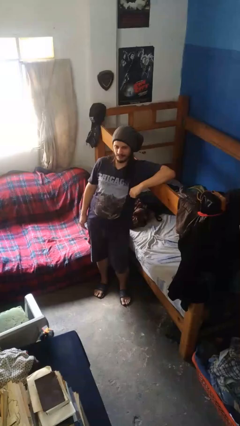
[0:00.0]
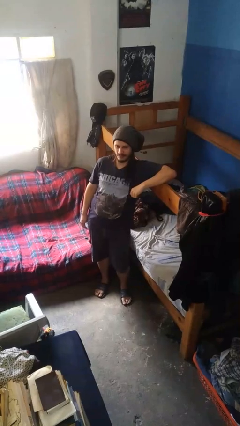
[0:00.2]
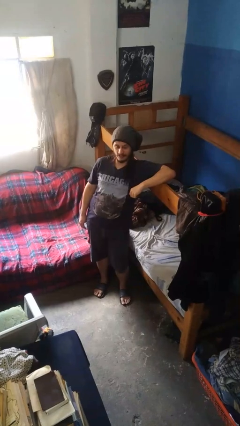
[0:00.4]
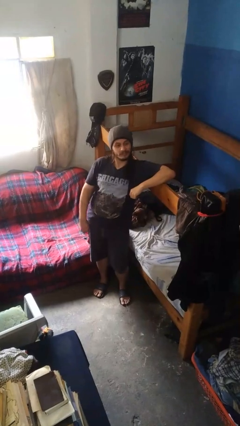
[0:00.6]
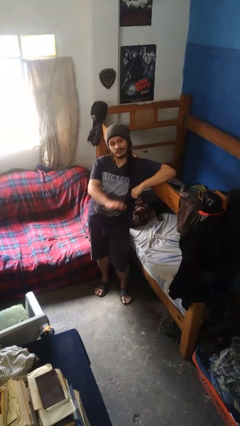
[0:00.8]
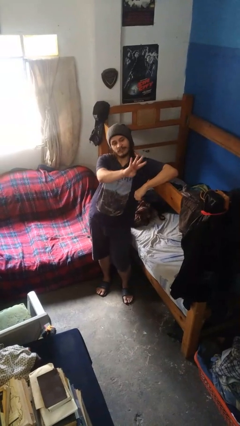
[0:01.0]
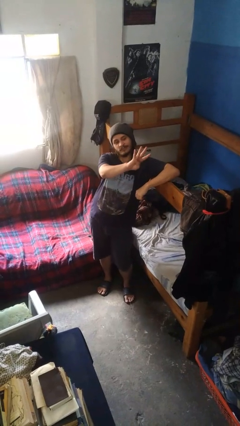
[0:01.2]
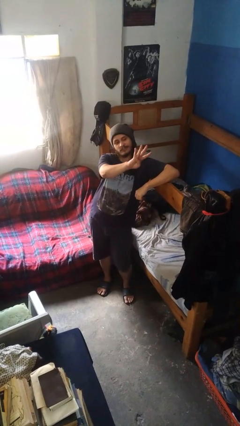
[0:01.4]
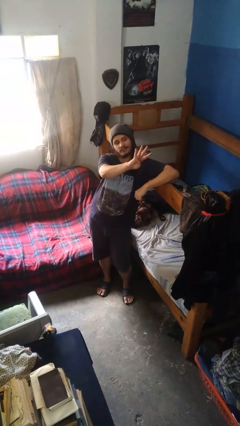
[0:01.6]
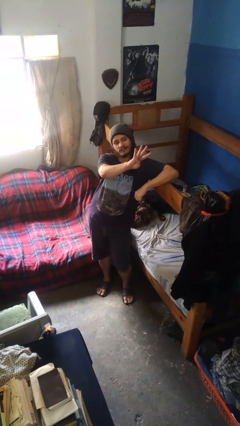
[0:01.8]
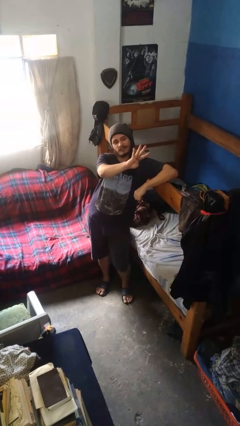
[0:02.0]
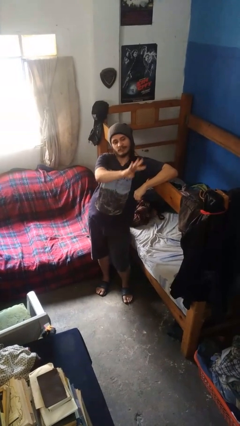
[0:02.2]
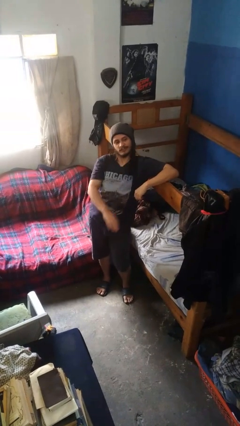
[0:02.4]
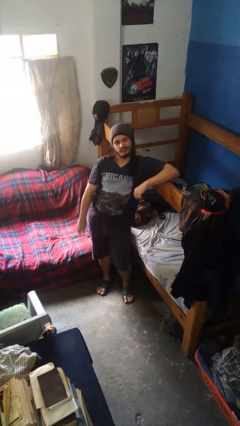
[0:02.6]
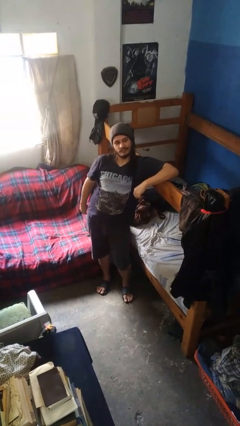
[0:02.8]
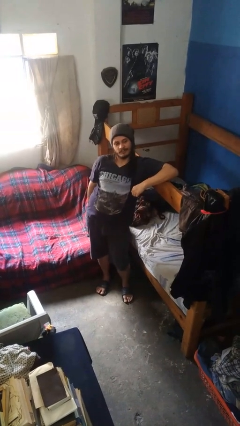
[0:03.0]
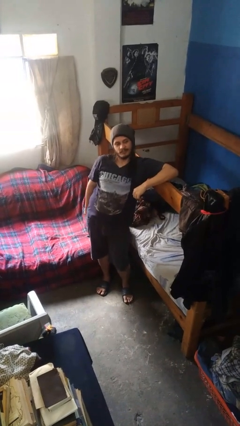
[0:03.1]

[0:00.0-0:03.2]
person gestures number four

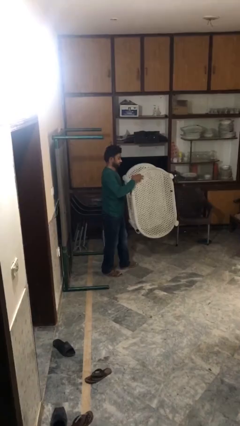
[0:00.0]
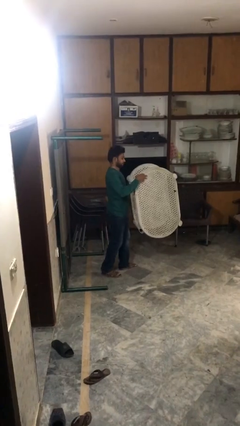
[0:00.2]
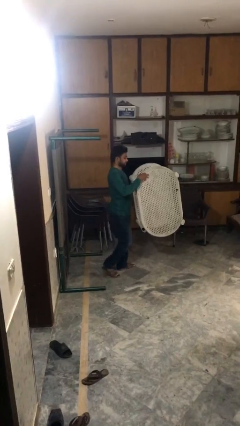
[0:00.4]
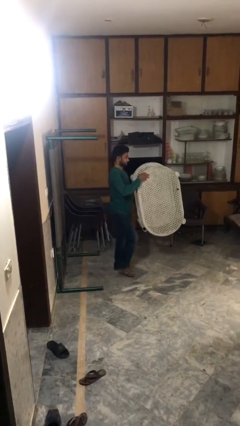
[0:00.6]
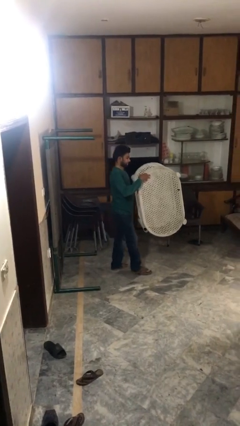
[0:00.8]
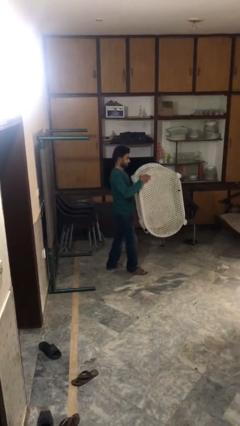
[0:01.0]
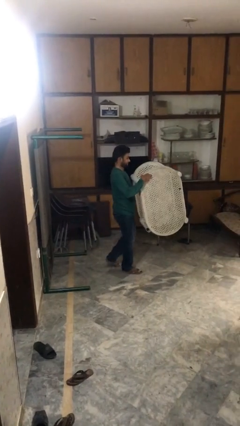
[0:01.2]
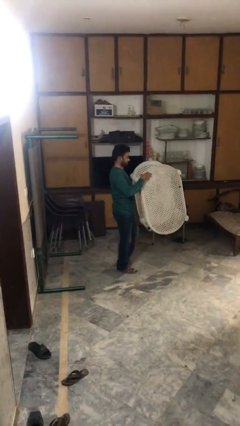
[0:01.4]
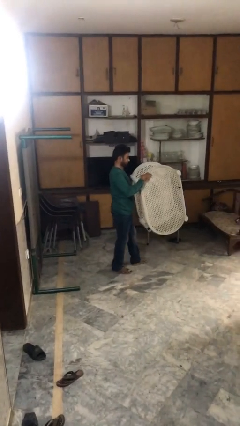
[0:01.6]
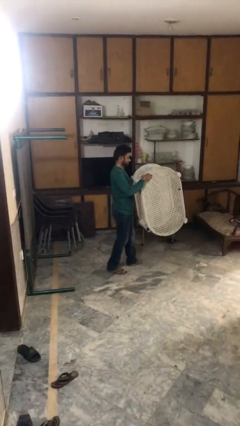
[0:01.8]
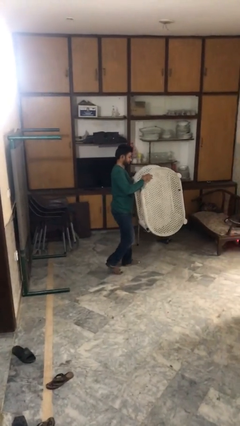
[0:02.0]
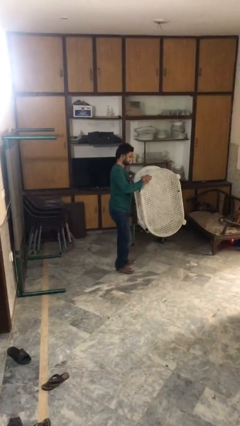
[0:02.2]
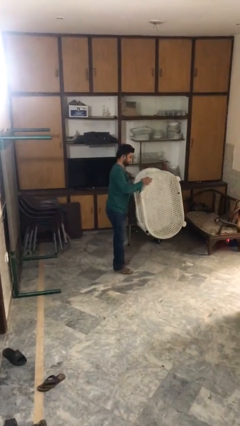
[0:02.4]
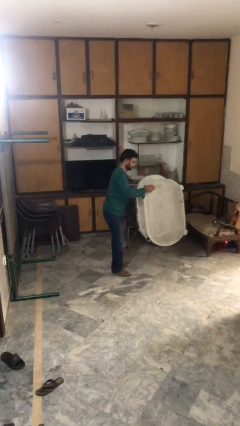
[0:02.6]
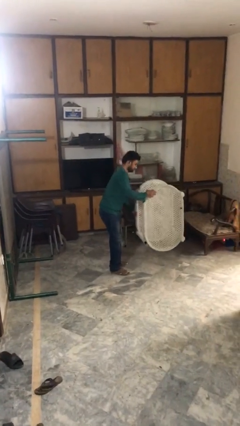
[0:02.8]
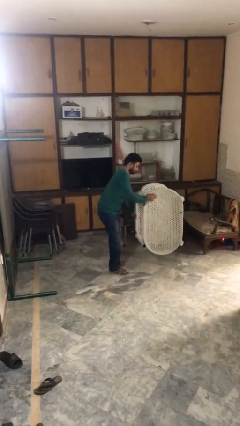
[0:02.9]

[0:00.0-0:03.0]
person carries heavy object

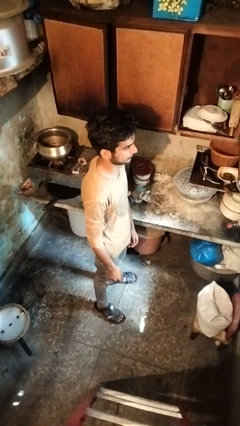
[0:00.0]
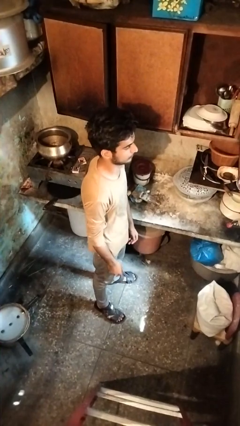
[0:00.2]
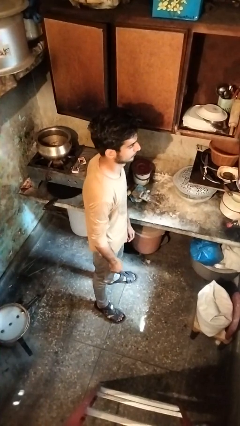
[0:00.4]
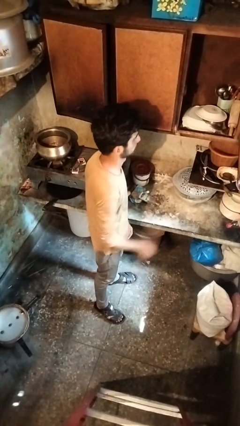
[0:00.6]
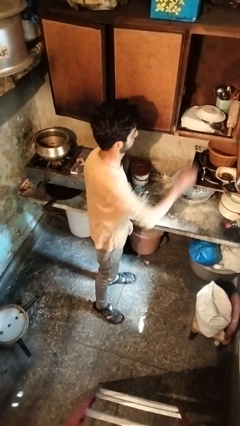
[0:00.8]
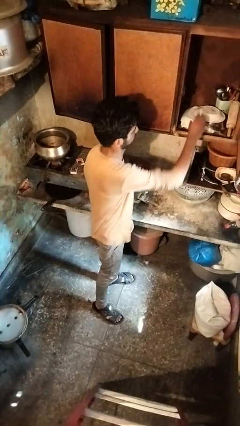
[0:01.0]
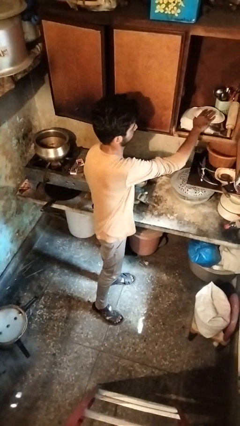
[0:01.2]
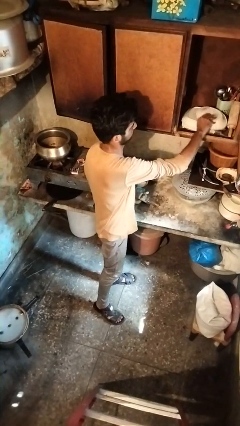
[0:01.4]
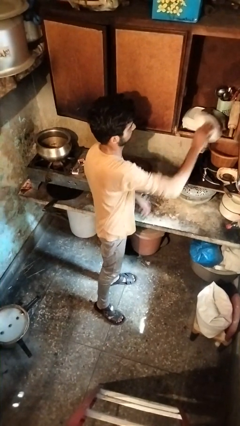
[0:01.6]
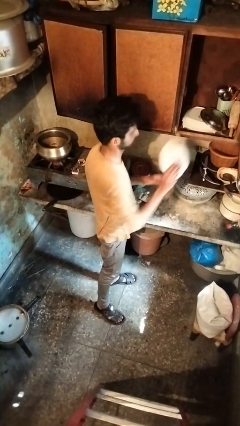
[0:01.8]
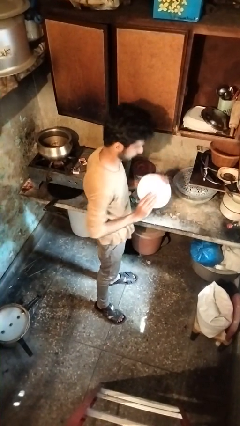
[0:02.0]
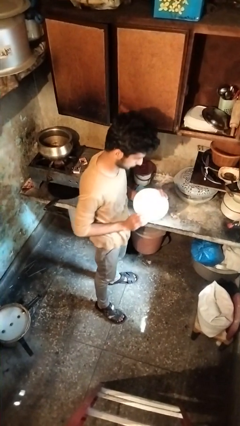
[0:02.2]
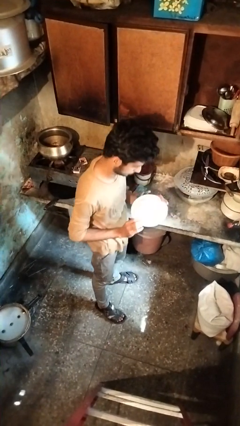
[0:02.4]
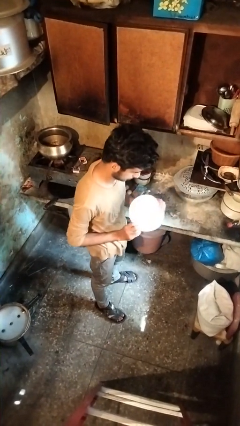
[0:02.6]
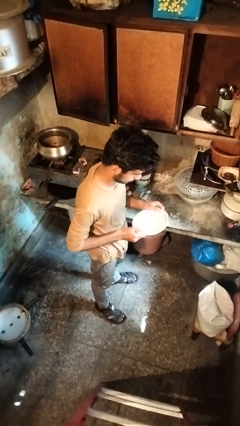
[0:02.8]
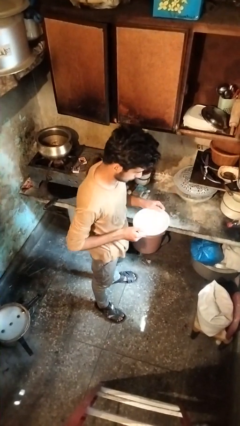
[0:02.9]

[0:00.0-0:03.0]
person picks up object from cabinet

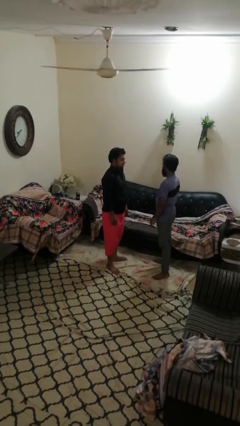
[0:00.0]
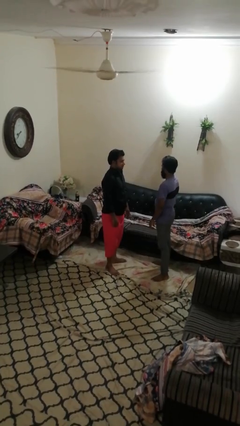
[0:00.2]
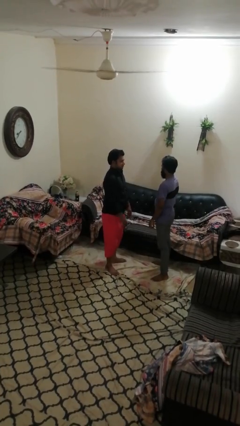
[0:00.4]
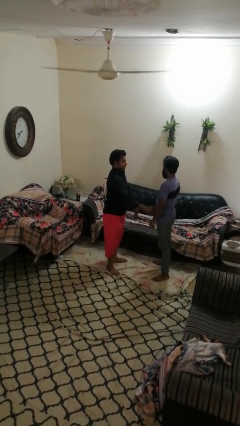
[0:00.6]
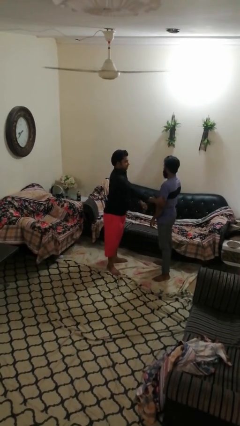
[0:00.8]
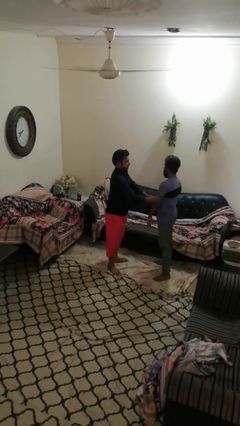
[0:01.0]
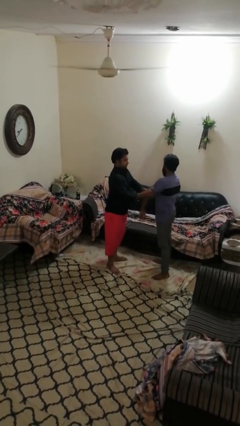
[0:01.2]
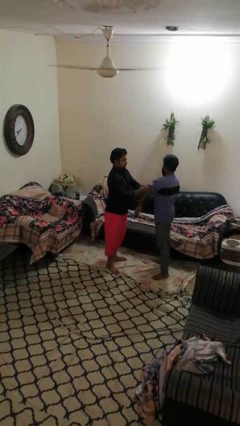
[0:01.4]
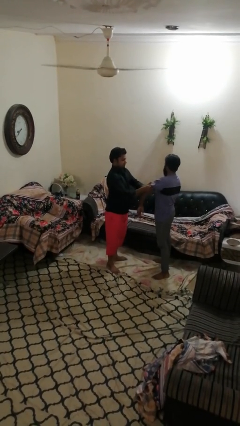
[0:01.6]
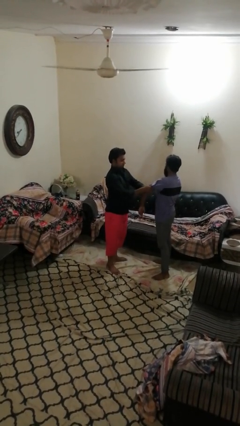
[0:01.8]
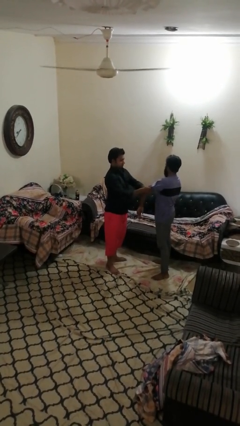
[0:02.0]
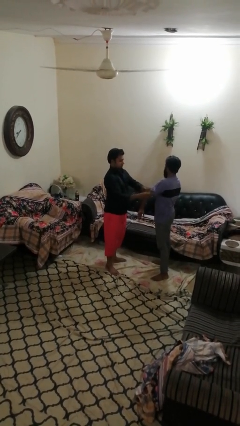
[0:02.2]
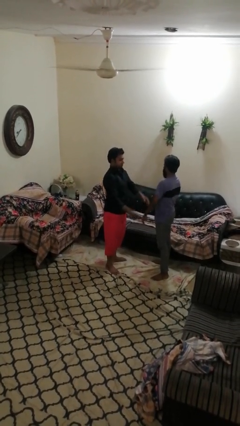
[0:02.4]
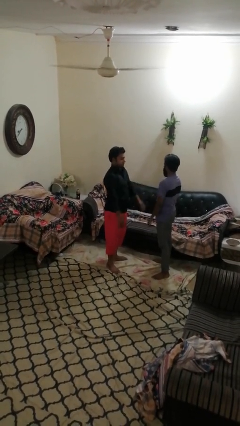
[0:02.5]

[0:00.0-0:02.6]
person grabs person by bicep

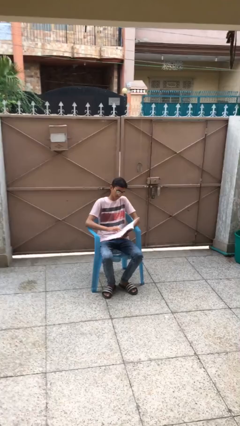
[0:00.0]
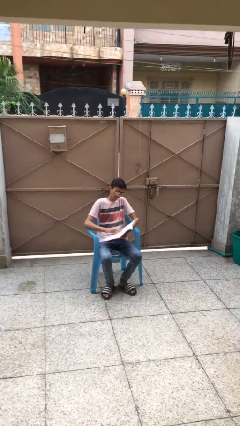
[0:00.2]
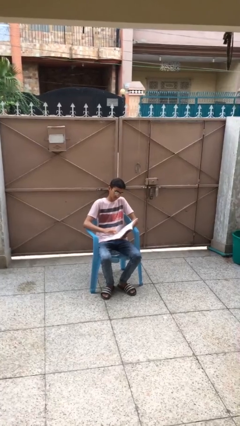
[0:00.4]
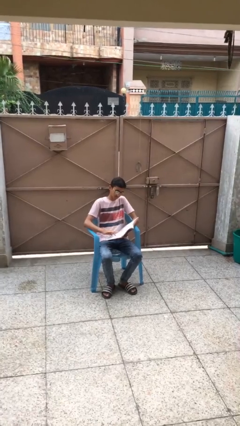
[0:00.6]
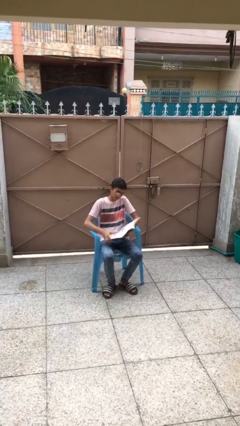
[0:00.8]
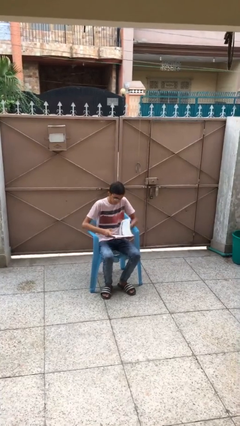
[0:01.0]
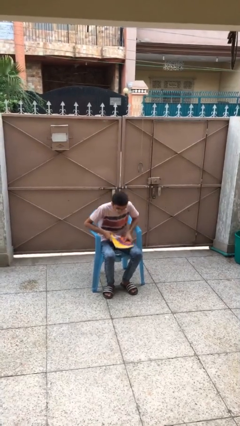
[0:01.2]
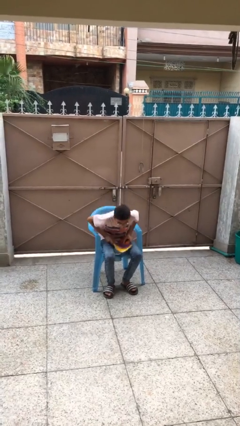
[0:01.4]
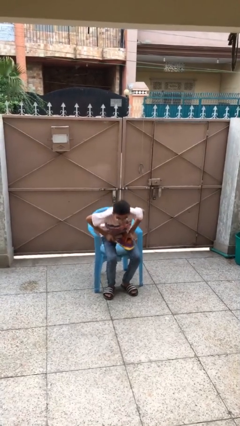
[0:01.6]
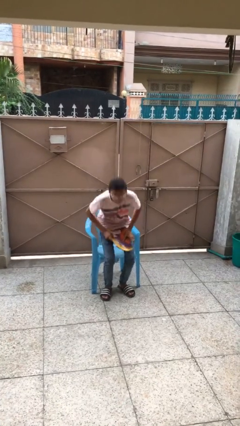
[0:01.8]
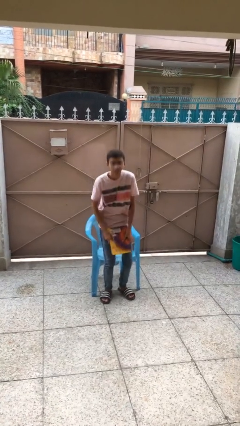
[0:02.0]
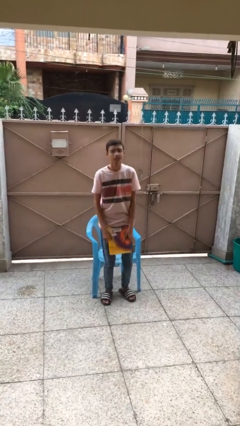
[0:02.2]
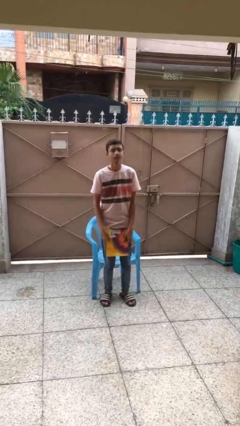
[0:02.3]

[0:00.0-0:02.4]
person stands up

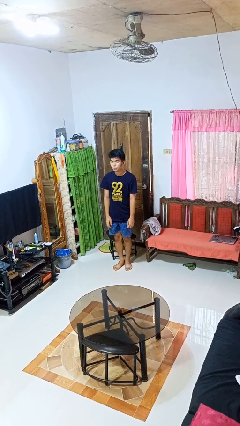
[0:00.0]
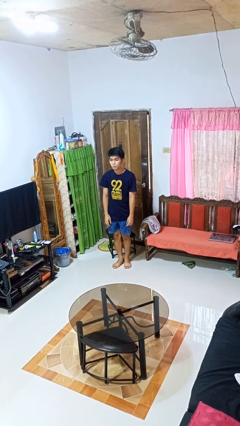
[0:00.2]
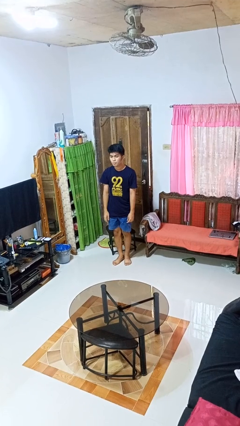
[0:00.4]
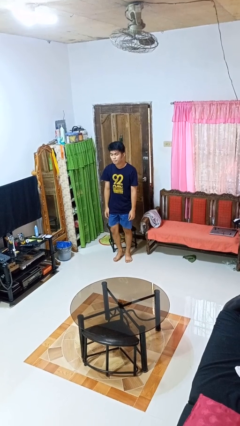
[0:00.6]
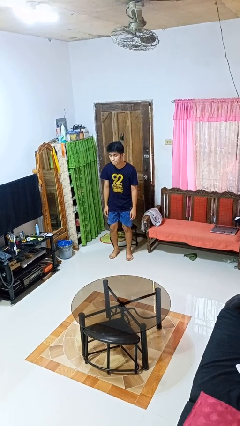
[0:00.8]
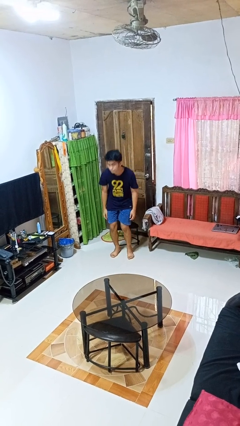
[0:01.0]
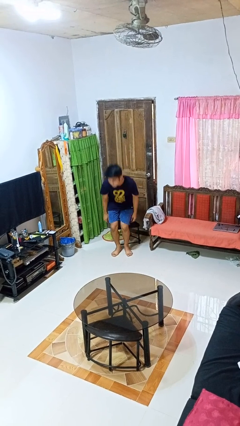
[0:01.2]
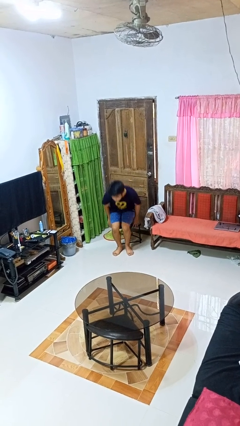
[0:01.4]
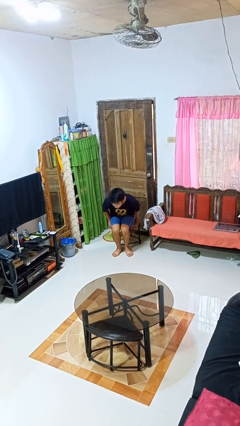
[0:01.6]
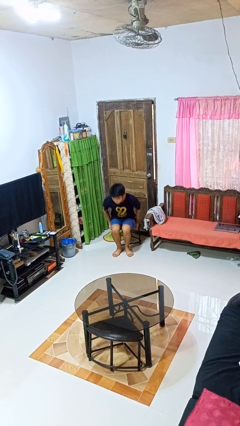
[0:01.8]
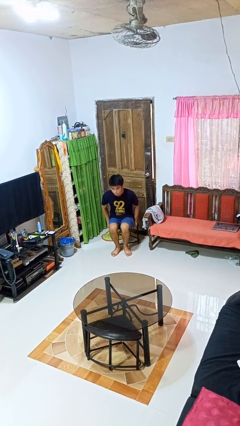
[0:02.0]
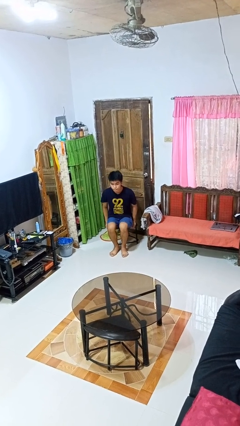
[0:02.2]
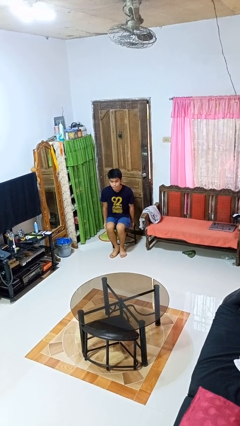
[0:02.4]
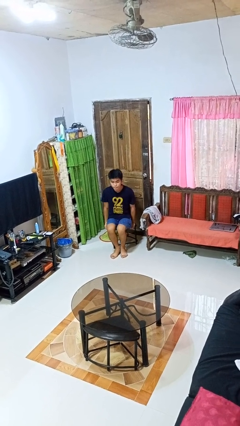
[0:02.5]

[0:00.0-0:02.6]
person sits down

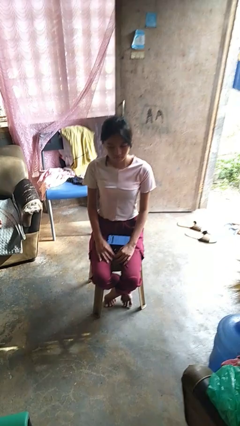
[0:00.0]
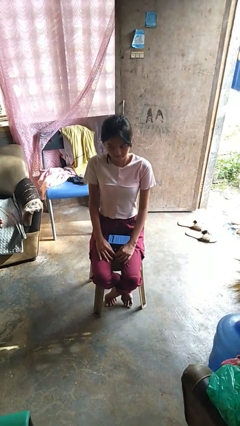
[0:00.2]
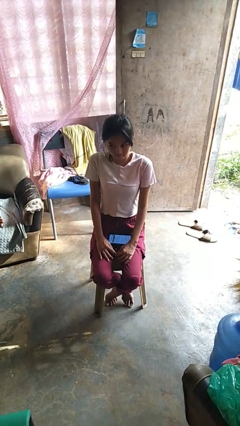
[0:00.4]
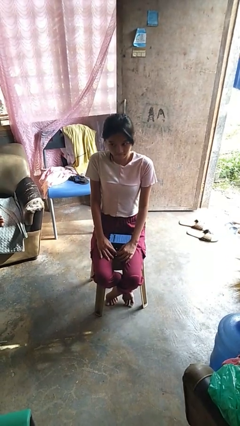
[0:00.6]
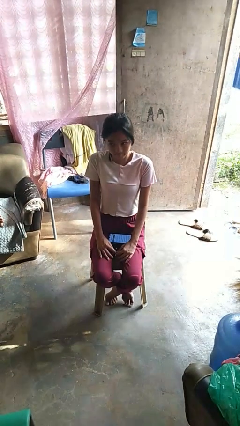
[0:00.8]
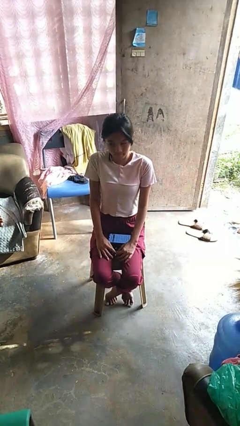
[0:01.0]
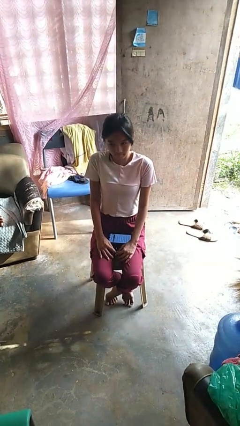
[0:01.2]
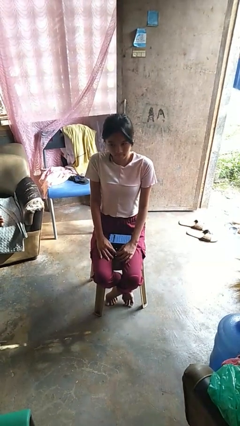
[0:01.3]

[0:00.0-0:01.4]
person shrugs
